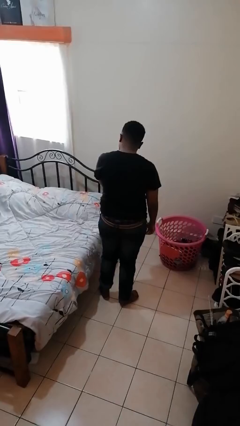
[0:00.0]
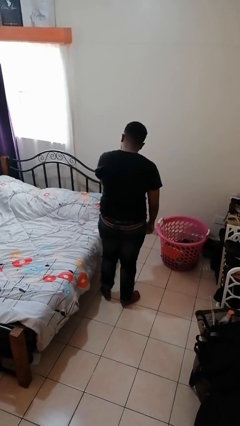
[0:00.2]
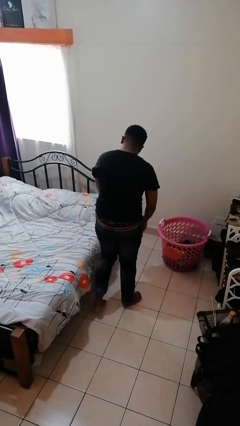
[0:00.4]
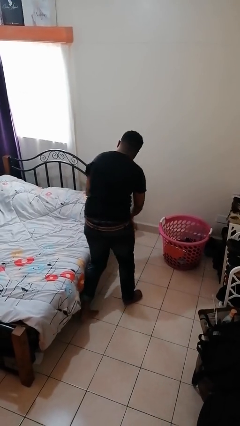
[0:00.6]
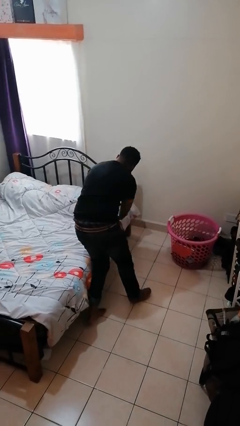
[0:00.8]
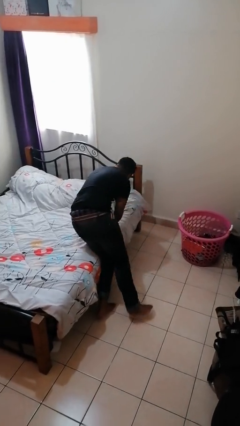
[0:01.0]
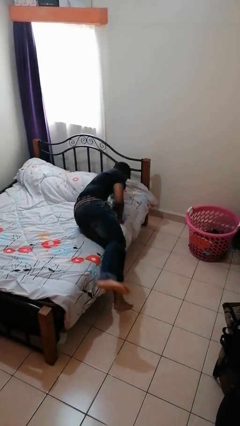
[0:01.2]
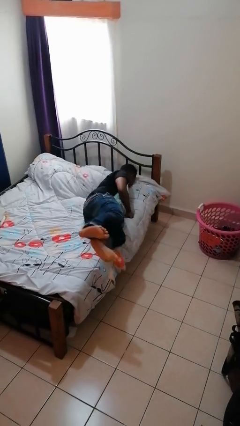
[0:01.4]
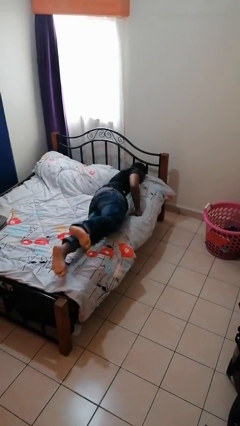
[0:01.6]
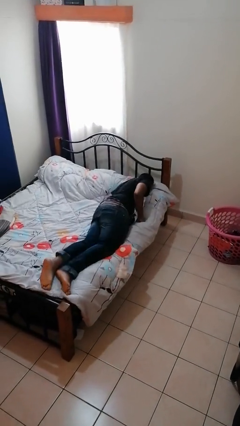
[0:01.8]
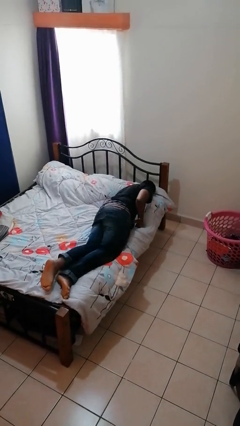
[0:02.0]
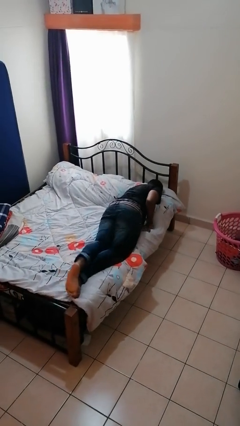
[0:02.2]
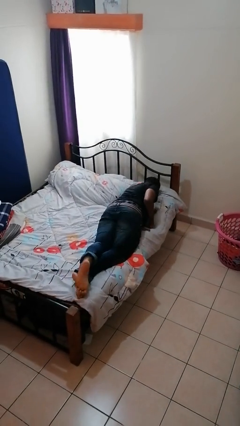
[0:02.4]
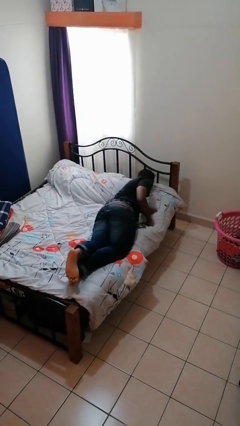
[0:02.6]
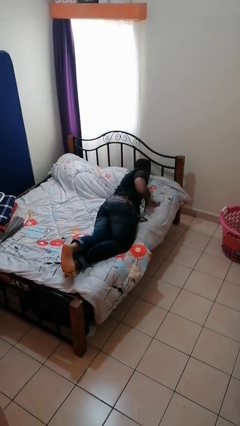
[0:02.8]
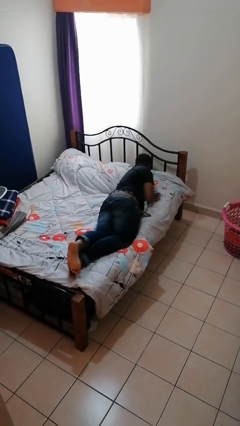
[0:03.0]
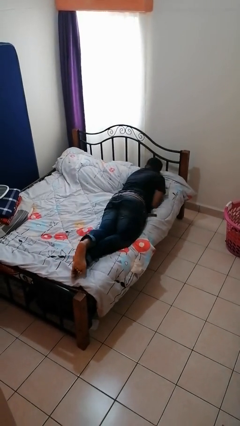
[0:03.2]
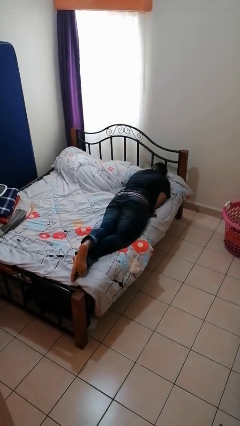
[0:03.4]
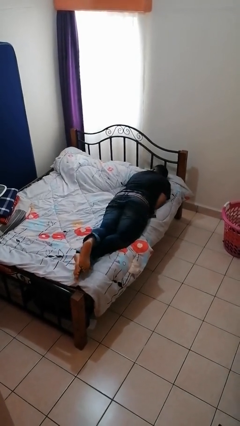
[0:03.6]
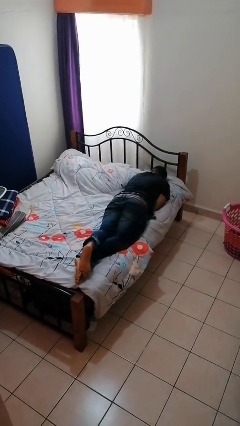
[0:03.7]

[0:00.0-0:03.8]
person lies down on bed

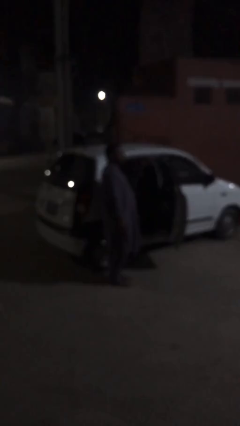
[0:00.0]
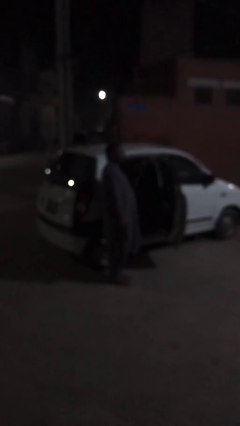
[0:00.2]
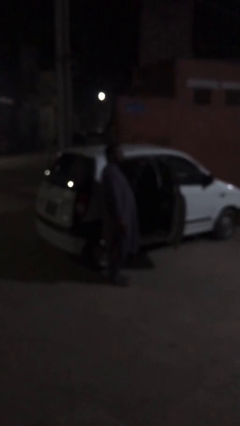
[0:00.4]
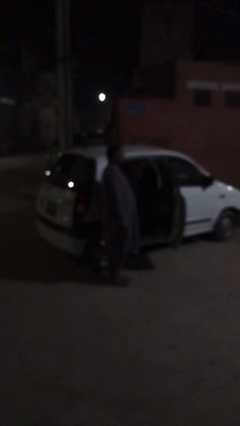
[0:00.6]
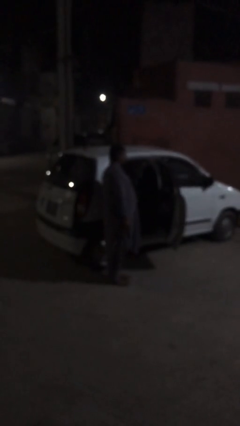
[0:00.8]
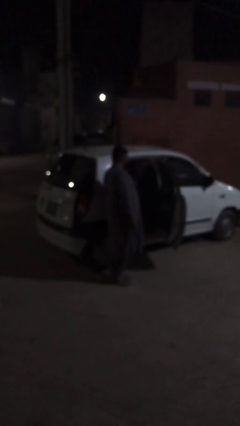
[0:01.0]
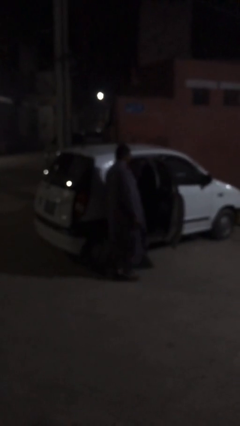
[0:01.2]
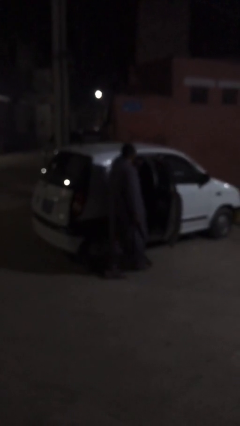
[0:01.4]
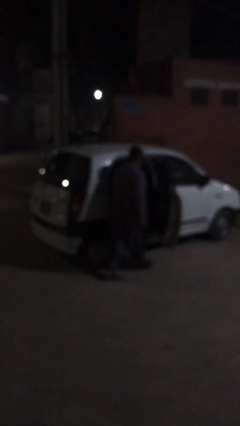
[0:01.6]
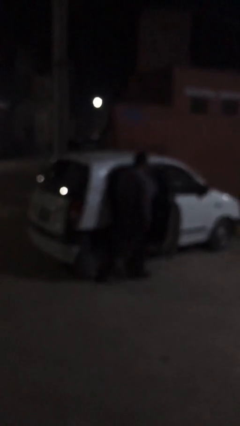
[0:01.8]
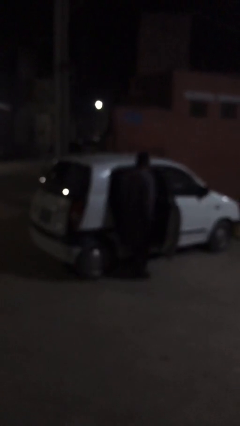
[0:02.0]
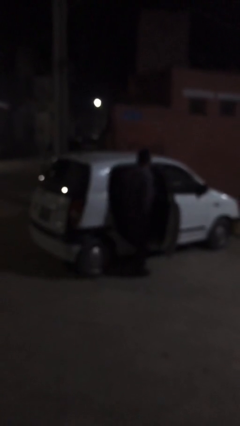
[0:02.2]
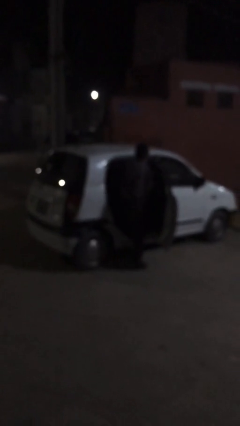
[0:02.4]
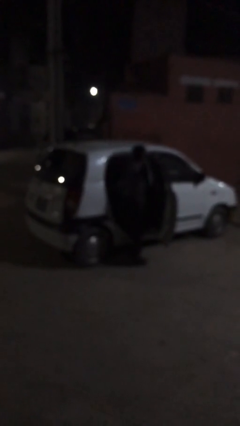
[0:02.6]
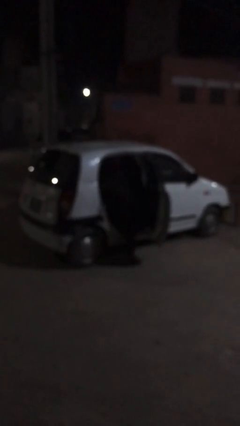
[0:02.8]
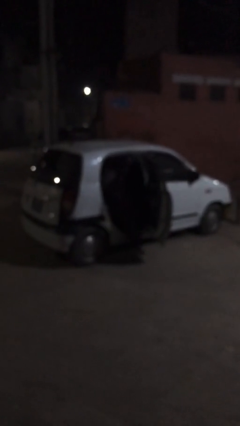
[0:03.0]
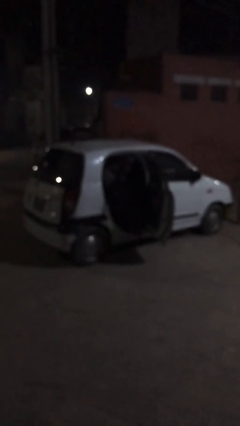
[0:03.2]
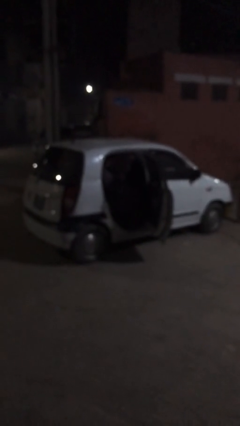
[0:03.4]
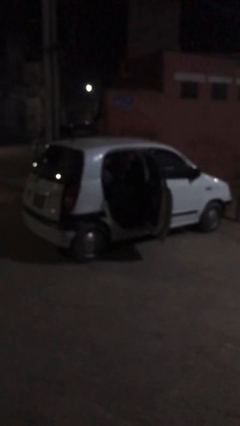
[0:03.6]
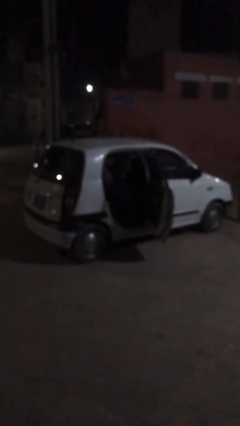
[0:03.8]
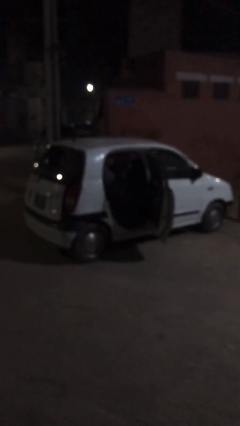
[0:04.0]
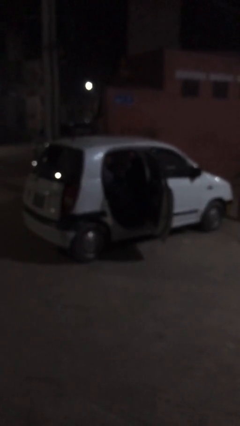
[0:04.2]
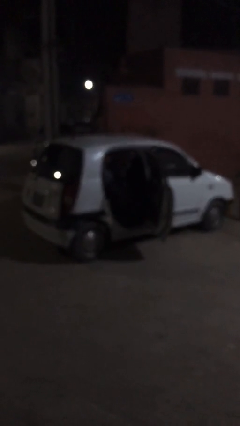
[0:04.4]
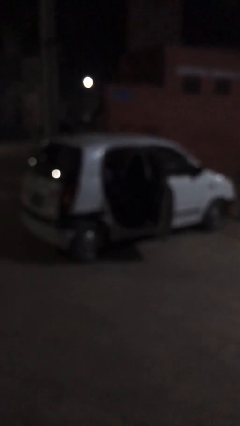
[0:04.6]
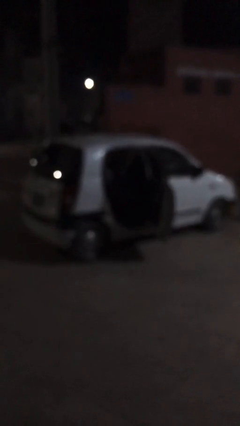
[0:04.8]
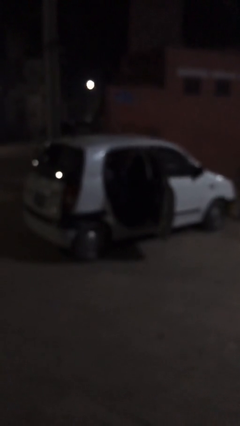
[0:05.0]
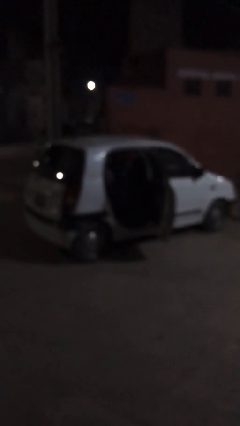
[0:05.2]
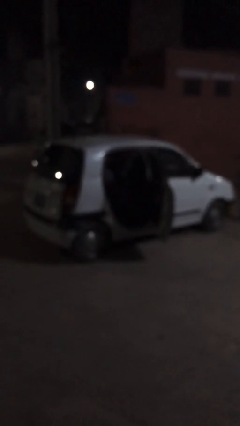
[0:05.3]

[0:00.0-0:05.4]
person enters car

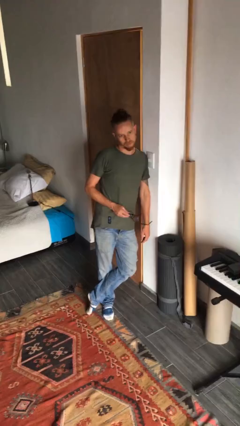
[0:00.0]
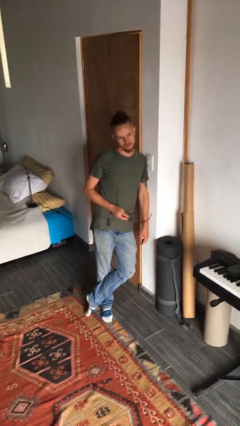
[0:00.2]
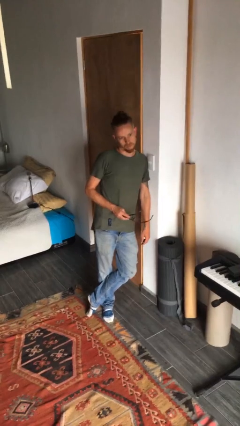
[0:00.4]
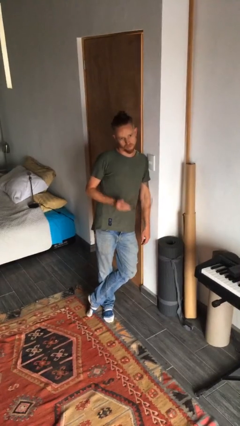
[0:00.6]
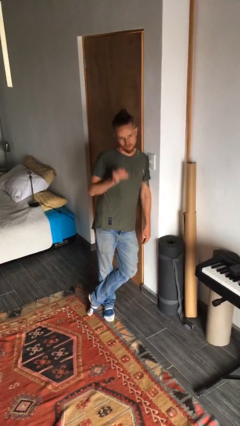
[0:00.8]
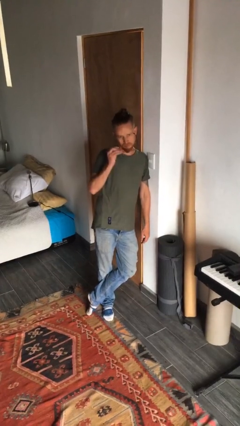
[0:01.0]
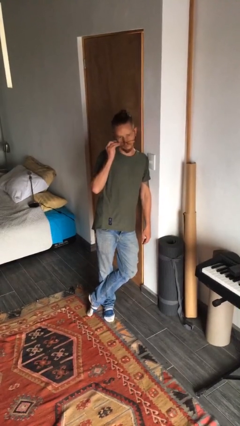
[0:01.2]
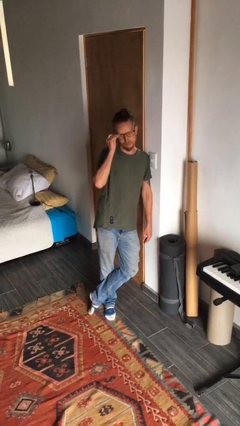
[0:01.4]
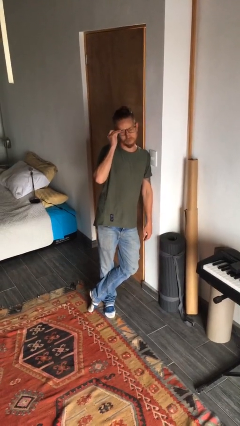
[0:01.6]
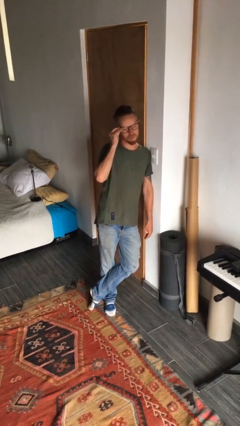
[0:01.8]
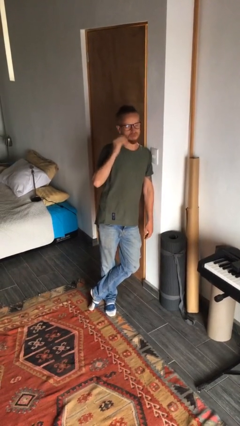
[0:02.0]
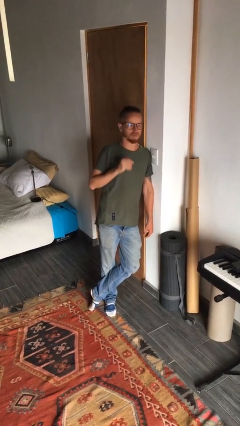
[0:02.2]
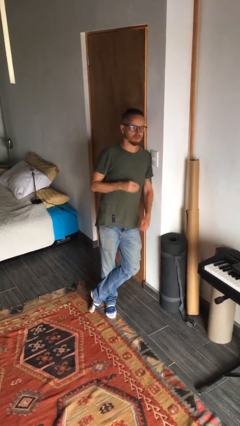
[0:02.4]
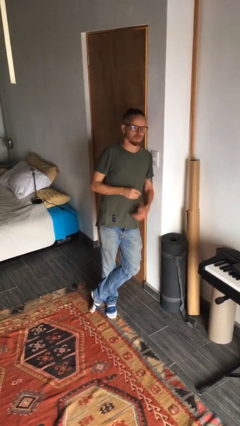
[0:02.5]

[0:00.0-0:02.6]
person puts on glasses

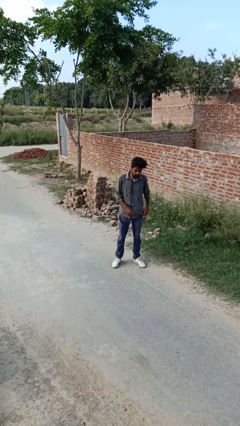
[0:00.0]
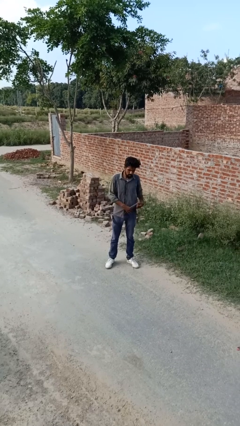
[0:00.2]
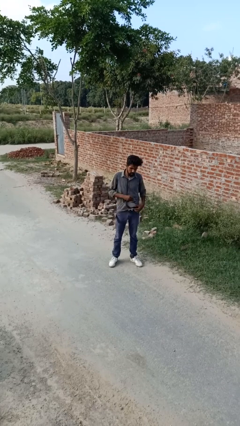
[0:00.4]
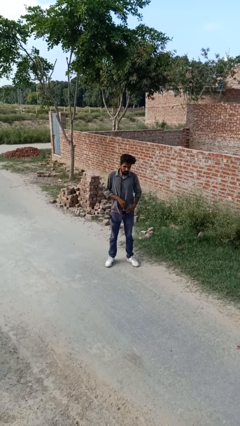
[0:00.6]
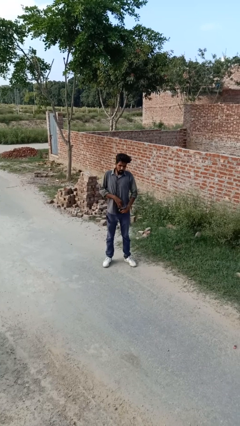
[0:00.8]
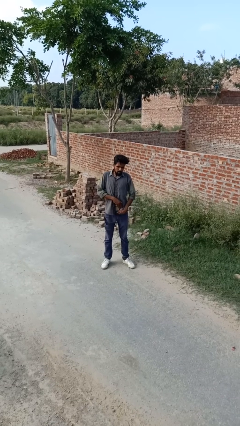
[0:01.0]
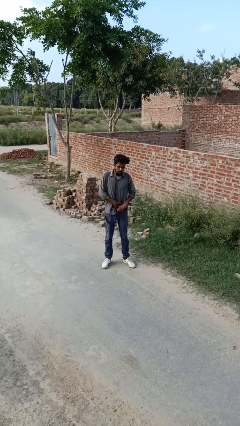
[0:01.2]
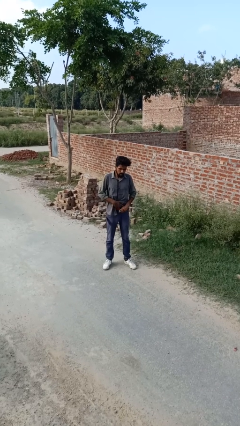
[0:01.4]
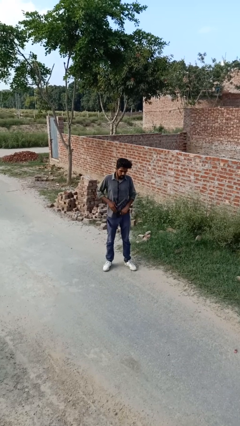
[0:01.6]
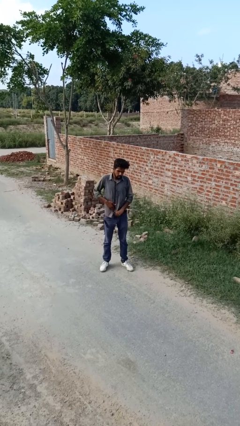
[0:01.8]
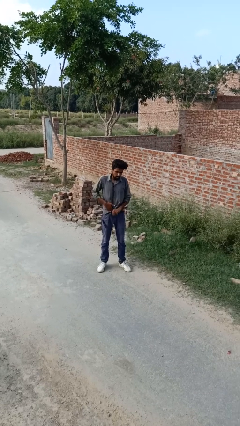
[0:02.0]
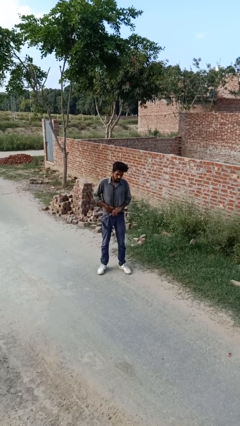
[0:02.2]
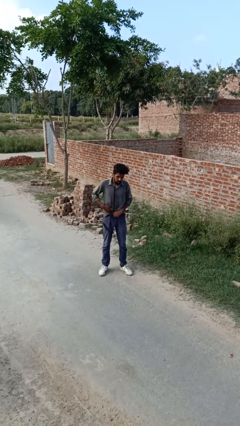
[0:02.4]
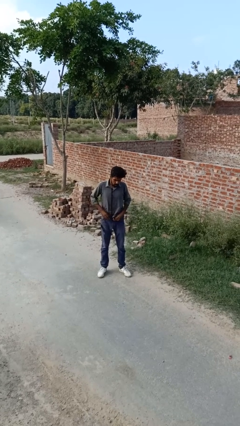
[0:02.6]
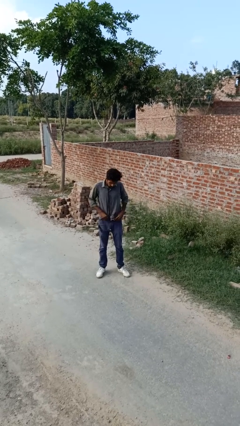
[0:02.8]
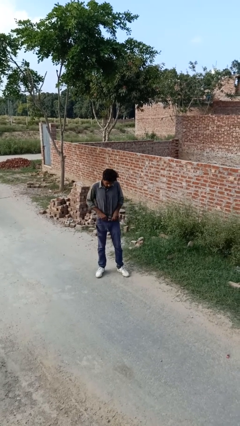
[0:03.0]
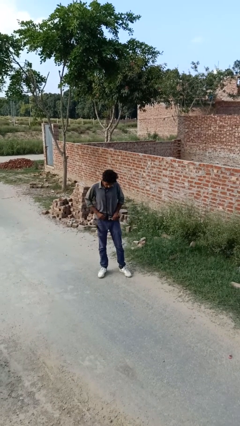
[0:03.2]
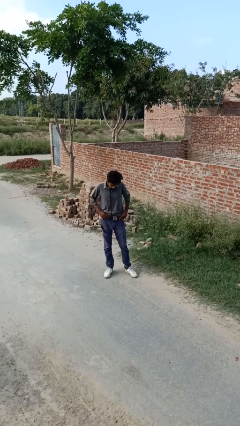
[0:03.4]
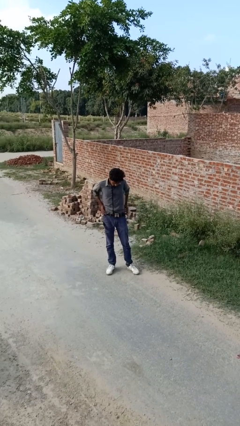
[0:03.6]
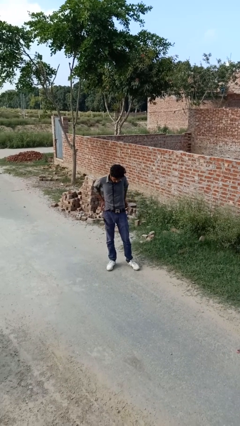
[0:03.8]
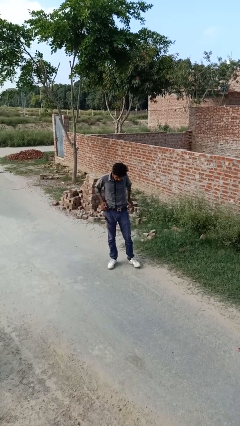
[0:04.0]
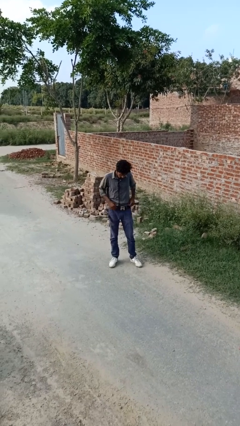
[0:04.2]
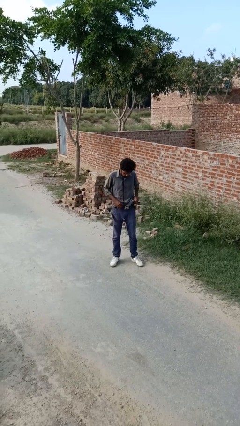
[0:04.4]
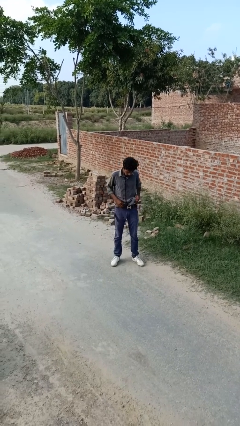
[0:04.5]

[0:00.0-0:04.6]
person tucks in shirt

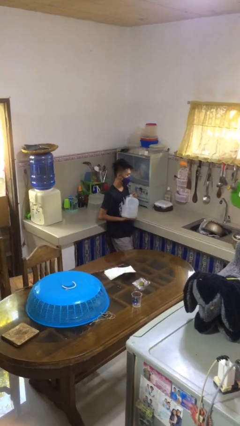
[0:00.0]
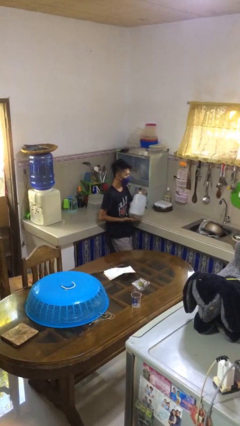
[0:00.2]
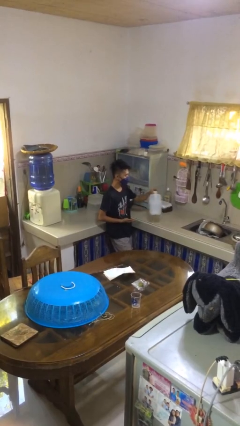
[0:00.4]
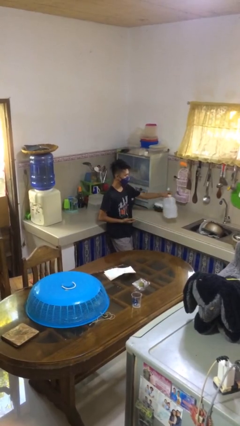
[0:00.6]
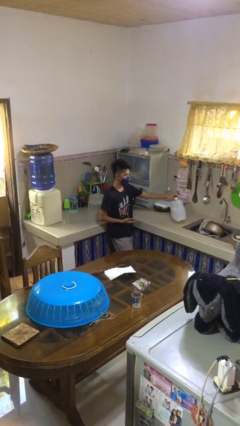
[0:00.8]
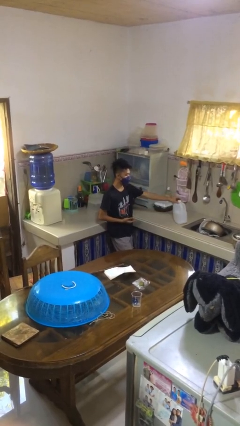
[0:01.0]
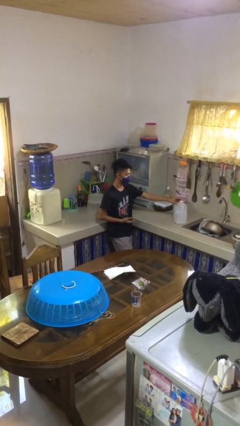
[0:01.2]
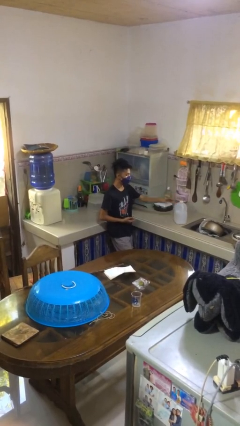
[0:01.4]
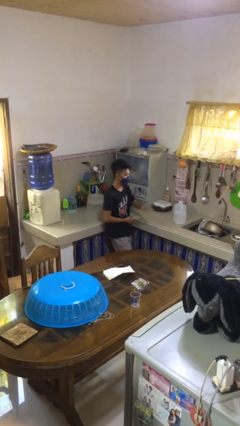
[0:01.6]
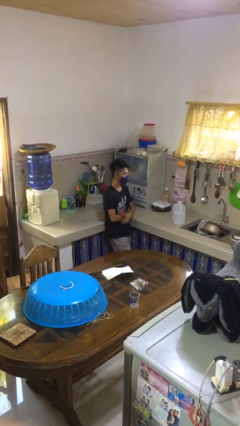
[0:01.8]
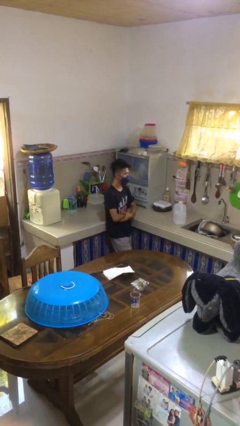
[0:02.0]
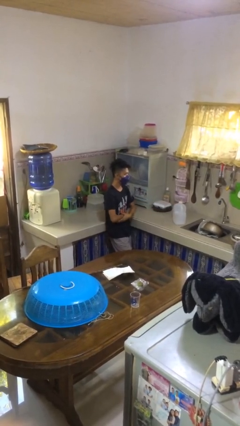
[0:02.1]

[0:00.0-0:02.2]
person puts down object on countertop
